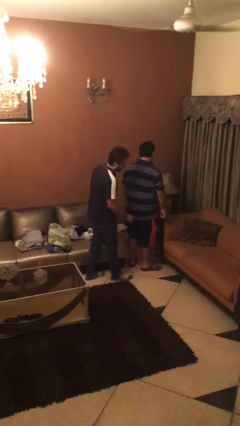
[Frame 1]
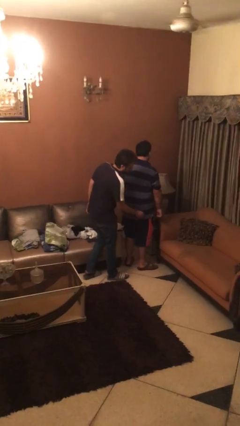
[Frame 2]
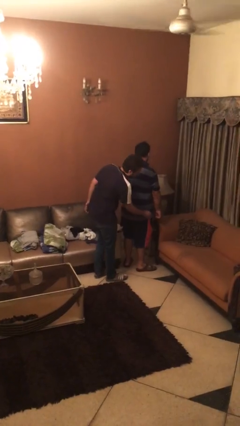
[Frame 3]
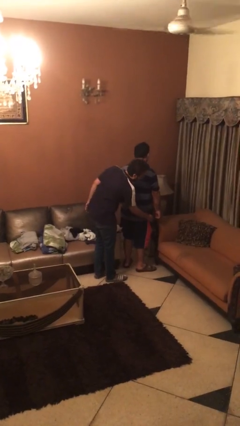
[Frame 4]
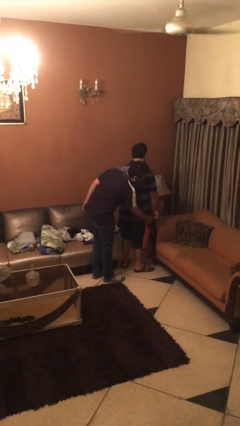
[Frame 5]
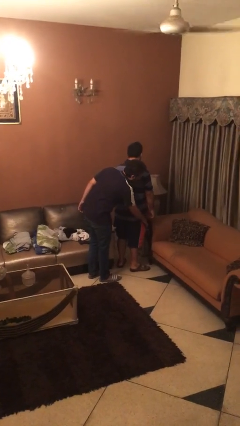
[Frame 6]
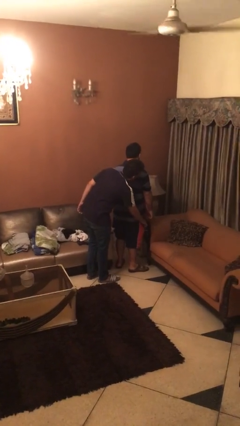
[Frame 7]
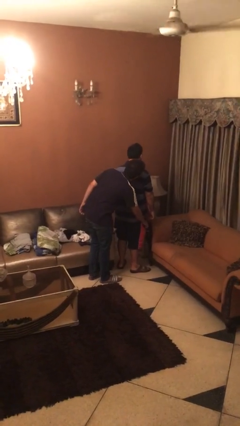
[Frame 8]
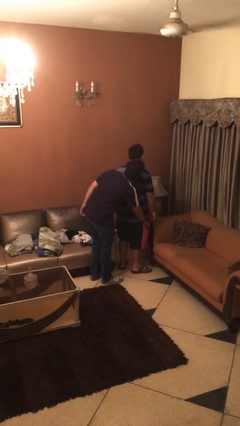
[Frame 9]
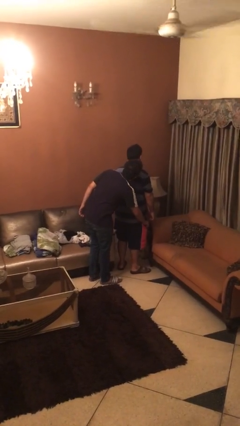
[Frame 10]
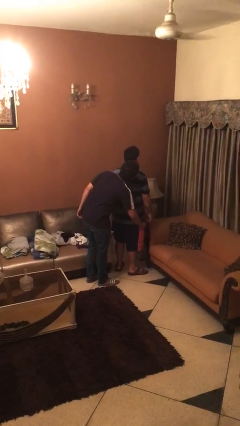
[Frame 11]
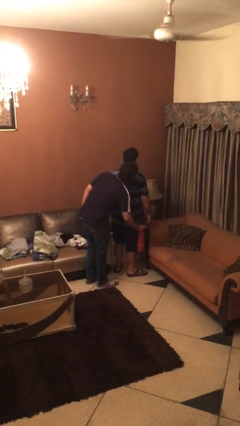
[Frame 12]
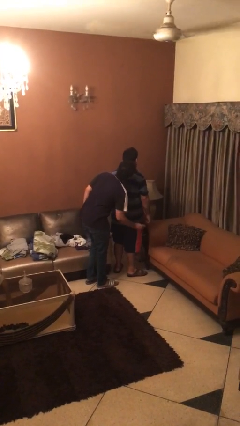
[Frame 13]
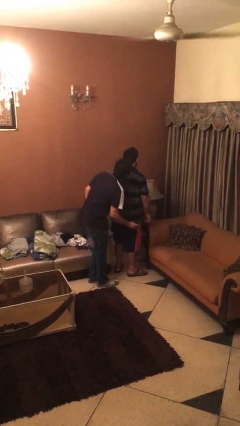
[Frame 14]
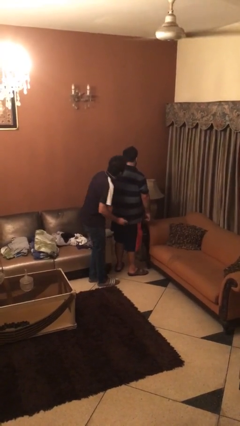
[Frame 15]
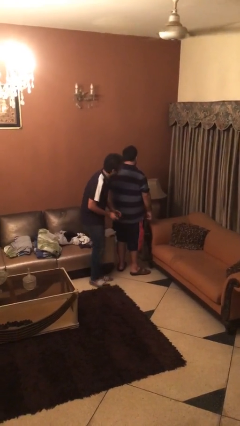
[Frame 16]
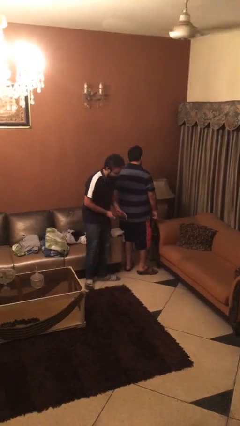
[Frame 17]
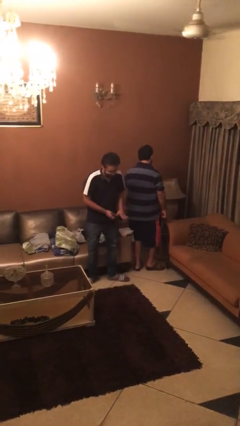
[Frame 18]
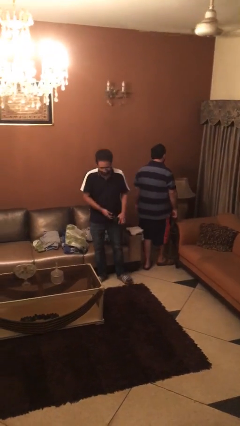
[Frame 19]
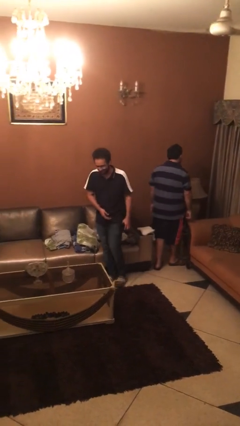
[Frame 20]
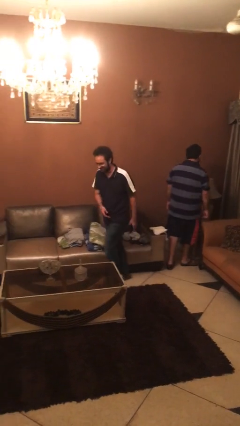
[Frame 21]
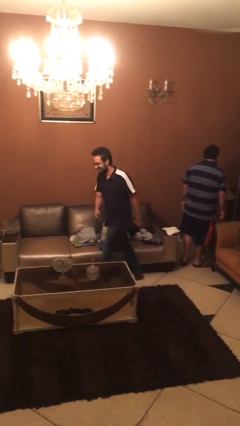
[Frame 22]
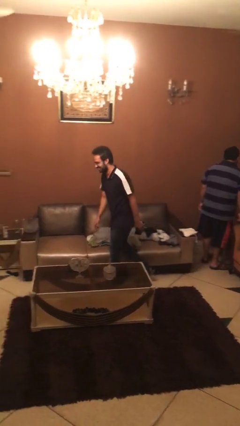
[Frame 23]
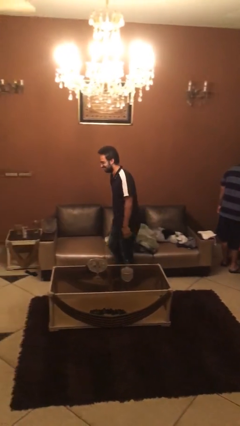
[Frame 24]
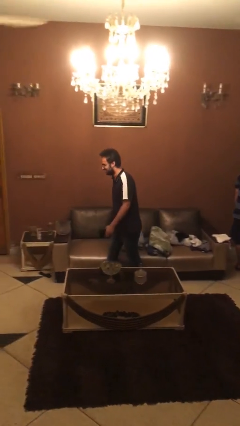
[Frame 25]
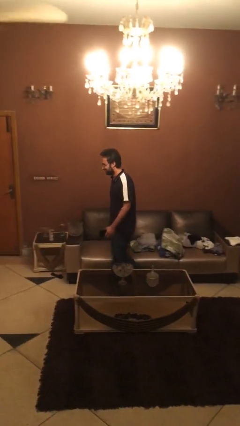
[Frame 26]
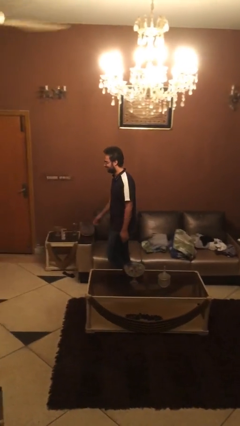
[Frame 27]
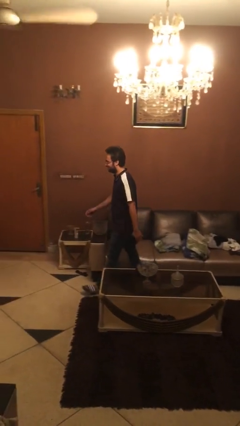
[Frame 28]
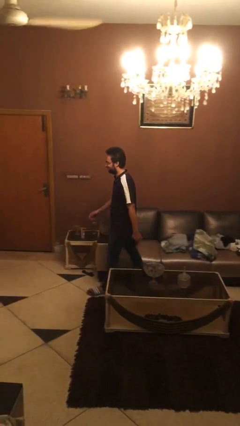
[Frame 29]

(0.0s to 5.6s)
person steals object from person

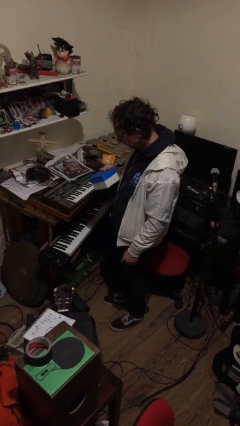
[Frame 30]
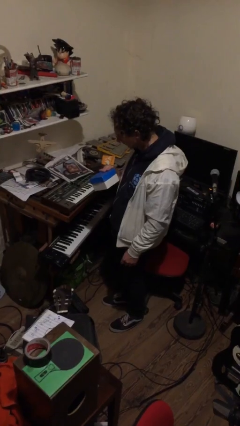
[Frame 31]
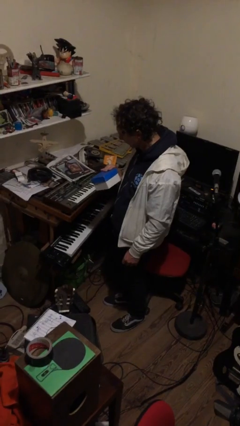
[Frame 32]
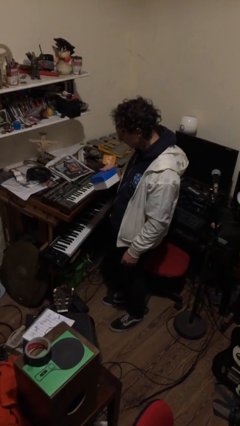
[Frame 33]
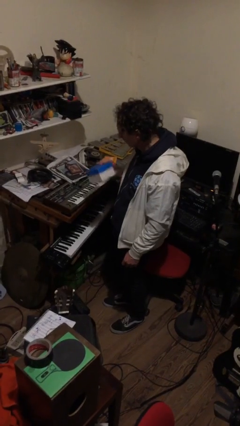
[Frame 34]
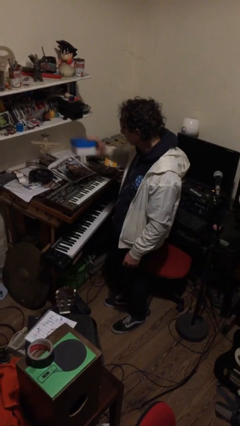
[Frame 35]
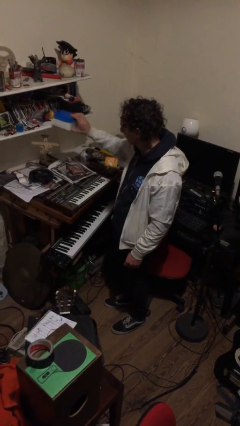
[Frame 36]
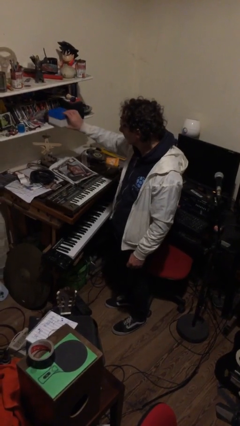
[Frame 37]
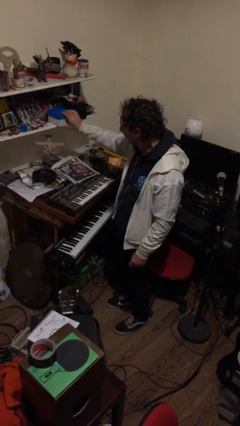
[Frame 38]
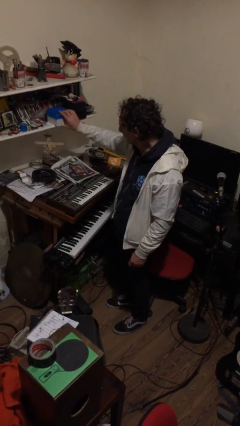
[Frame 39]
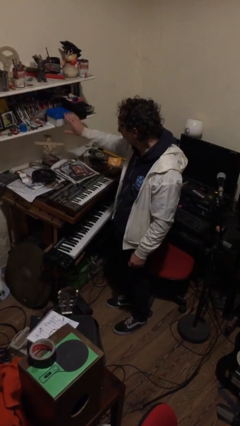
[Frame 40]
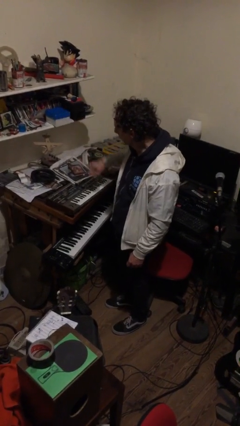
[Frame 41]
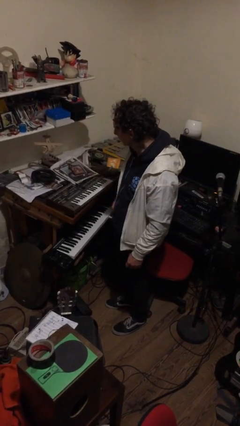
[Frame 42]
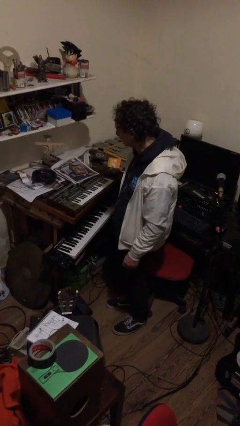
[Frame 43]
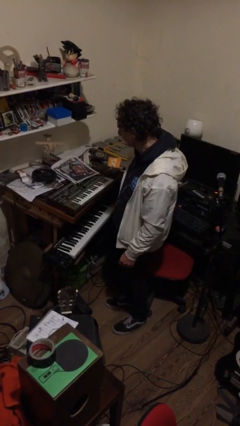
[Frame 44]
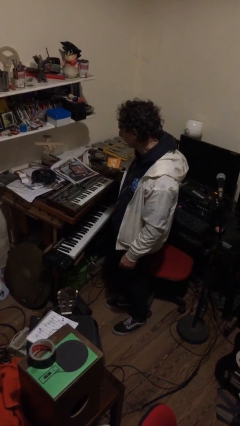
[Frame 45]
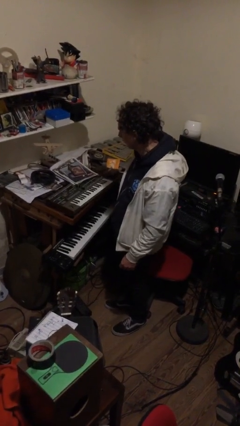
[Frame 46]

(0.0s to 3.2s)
person puts down object on countertop

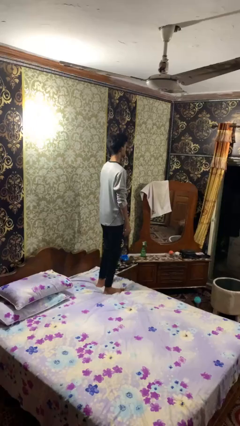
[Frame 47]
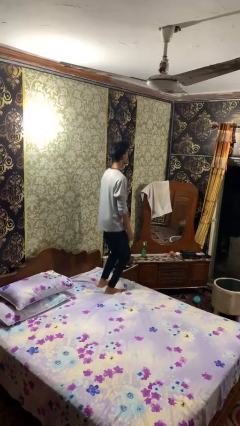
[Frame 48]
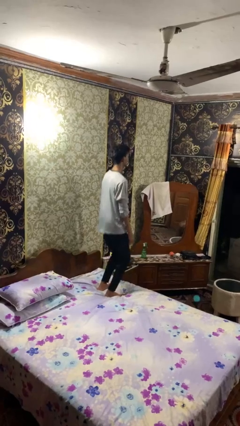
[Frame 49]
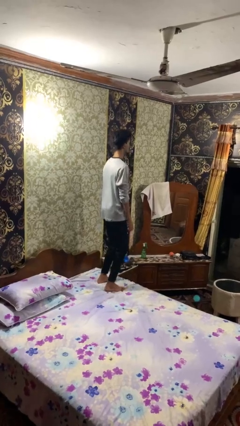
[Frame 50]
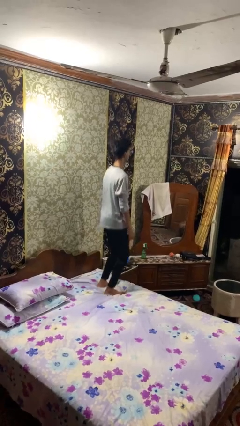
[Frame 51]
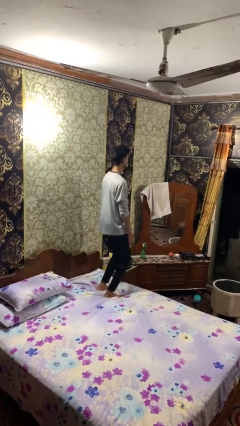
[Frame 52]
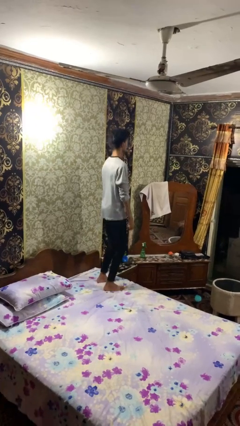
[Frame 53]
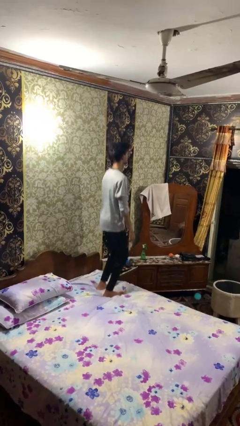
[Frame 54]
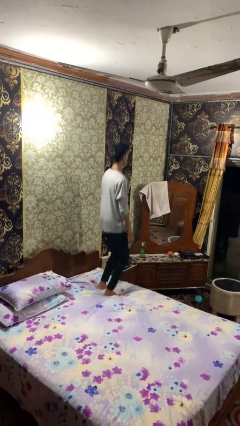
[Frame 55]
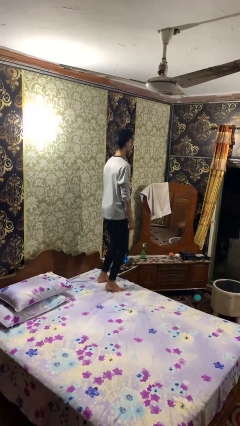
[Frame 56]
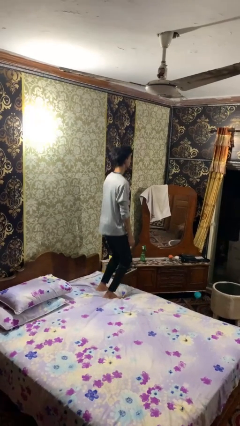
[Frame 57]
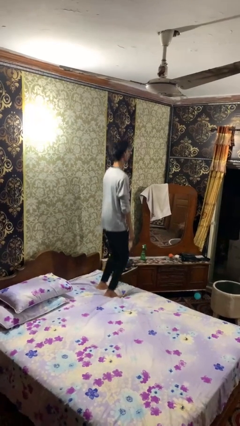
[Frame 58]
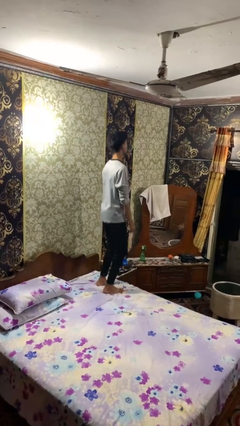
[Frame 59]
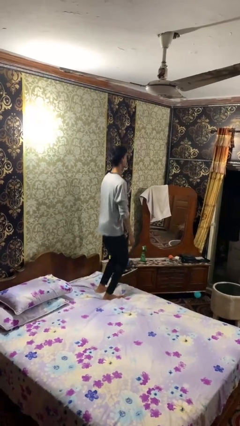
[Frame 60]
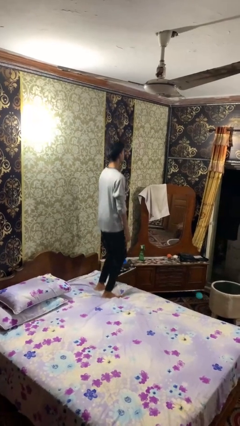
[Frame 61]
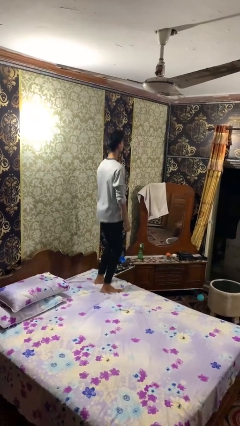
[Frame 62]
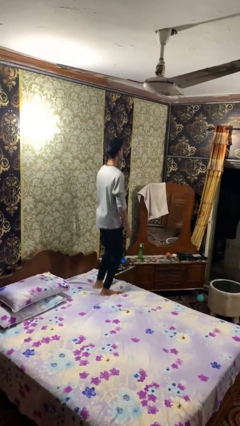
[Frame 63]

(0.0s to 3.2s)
person jumps on bed

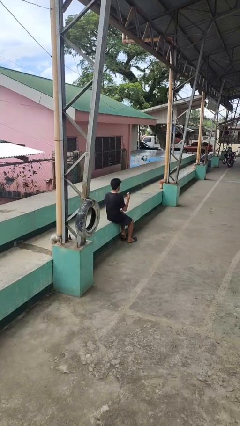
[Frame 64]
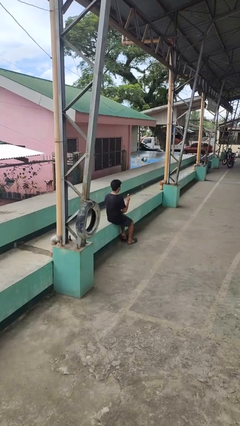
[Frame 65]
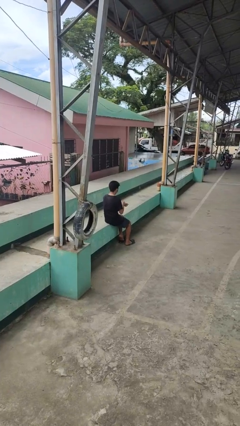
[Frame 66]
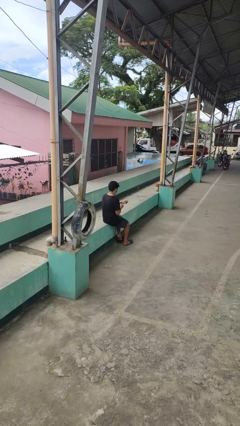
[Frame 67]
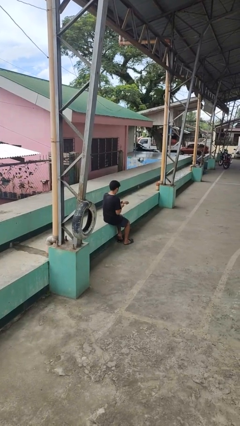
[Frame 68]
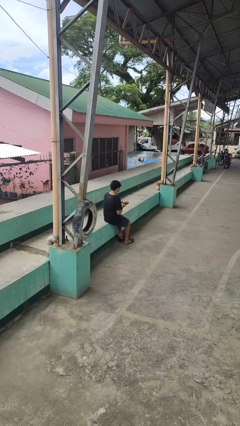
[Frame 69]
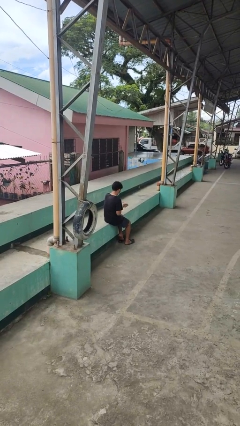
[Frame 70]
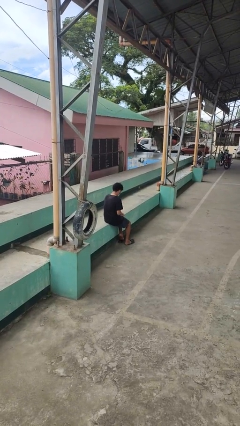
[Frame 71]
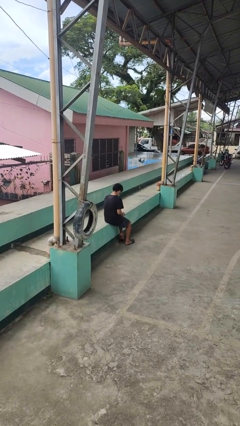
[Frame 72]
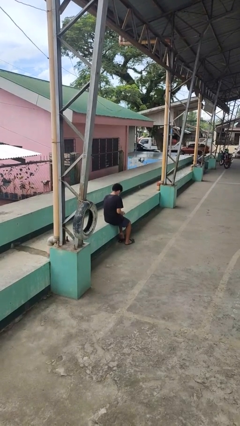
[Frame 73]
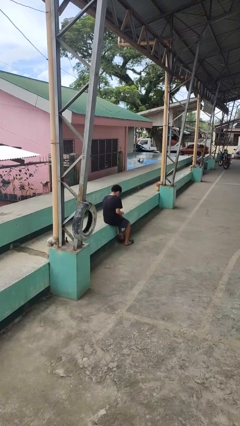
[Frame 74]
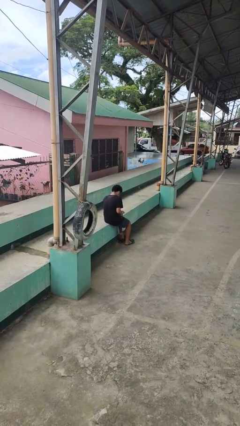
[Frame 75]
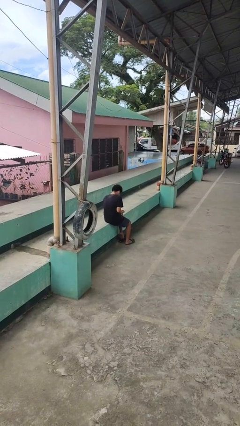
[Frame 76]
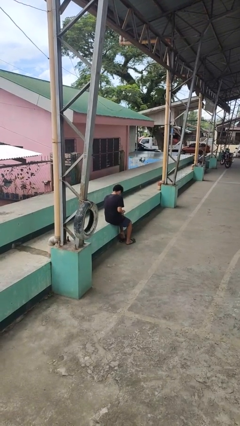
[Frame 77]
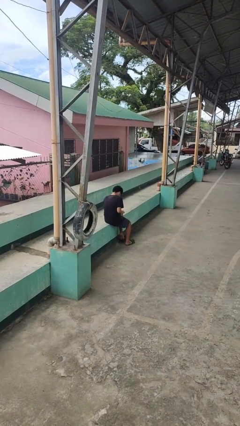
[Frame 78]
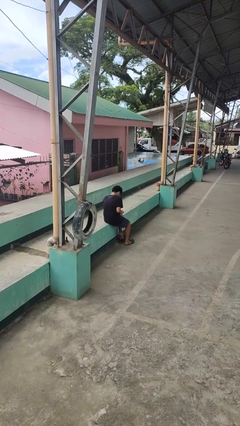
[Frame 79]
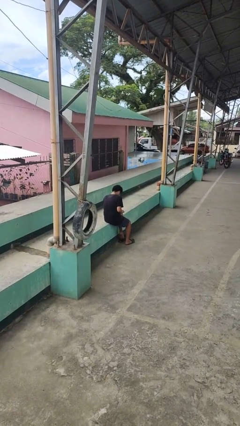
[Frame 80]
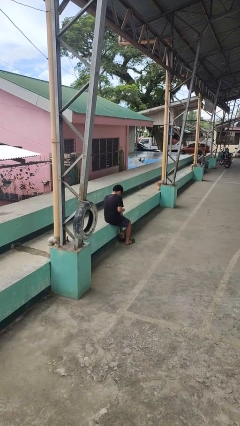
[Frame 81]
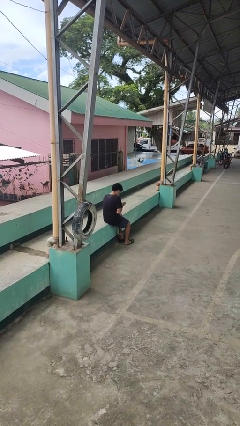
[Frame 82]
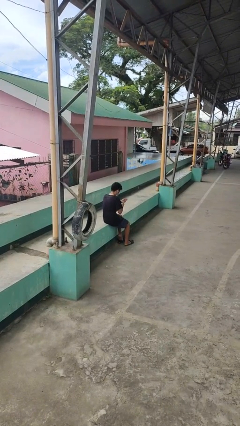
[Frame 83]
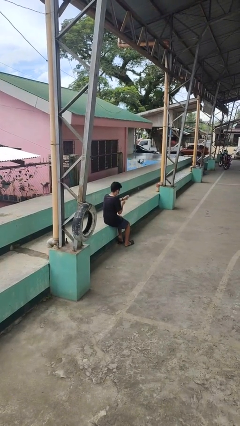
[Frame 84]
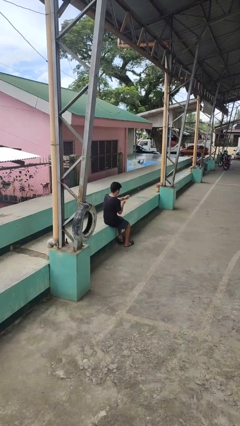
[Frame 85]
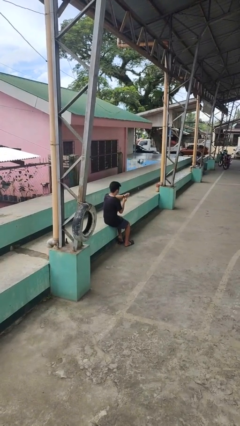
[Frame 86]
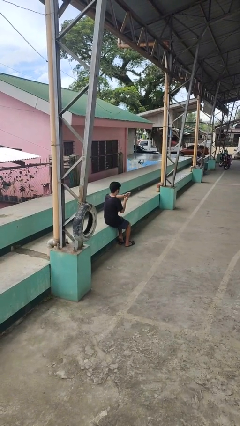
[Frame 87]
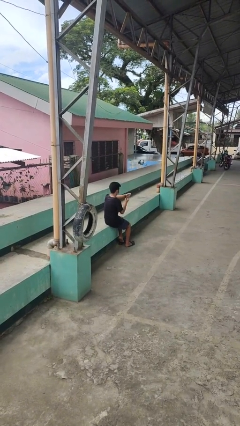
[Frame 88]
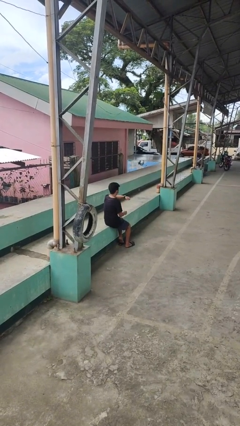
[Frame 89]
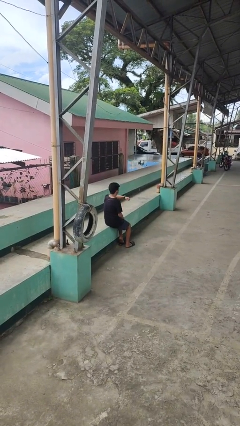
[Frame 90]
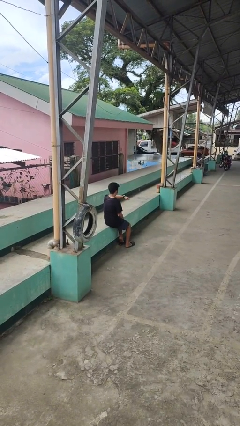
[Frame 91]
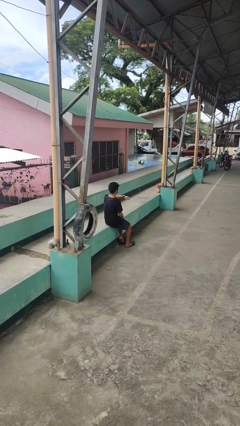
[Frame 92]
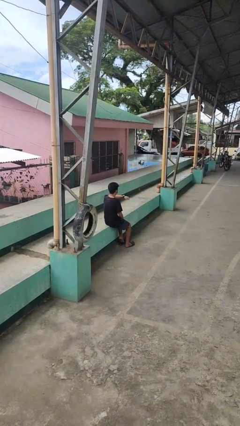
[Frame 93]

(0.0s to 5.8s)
person puts on wristwatch
